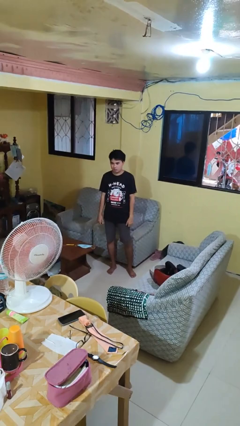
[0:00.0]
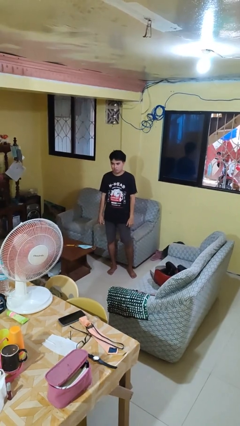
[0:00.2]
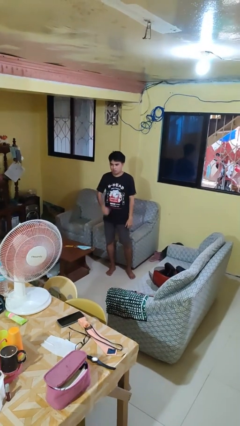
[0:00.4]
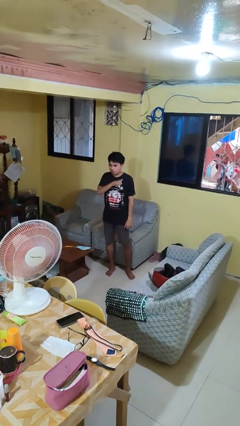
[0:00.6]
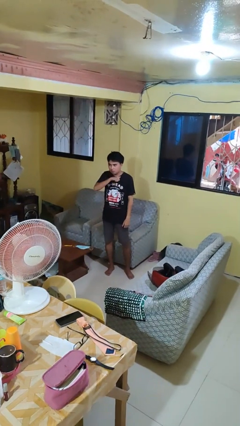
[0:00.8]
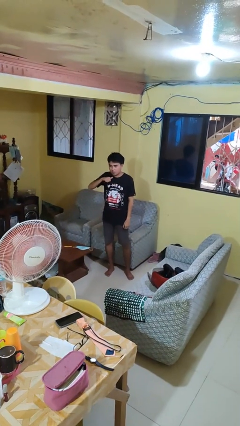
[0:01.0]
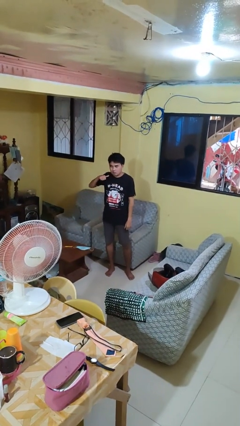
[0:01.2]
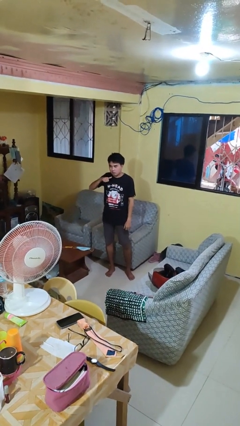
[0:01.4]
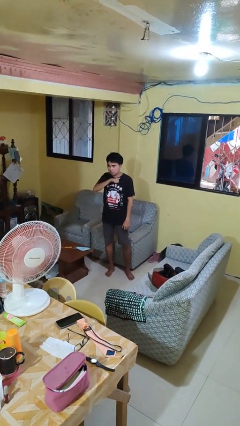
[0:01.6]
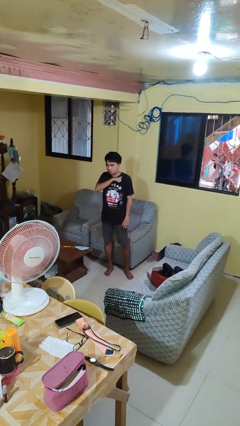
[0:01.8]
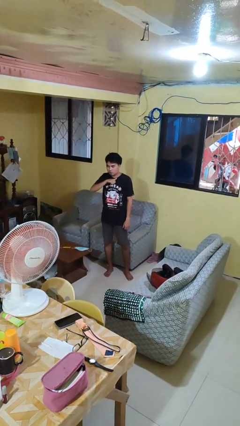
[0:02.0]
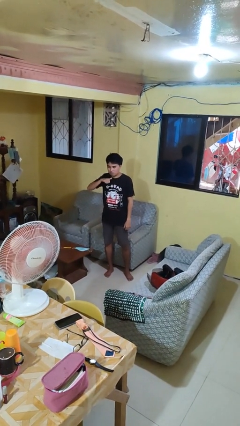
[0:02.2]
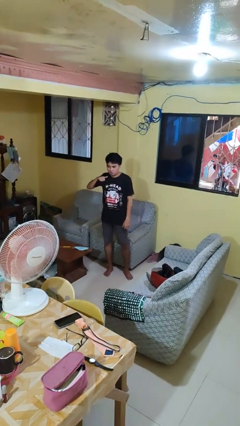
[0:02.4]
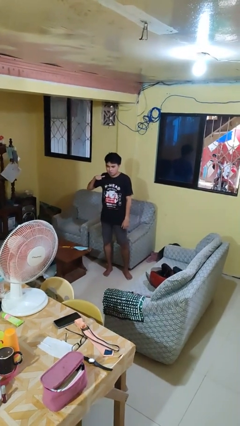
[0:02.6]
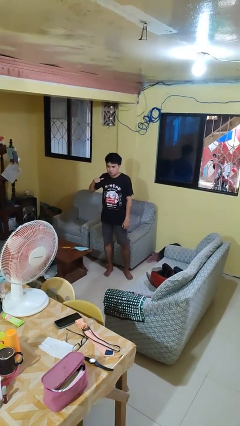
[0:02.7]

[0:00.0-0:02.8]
person gestures cut

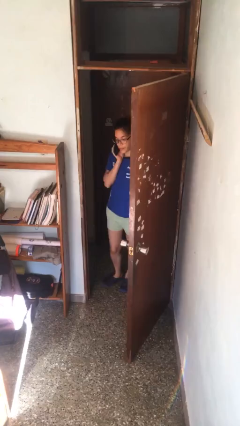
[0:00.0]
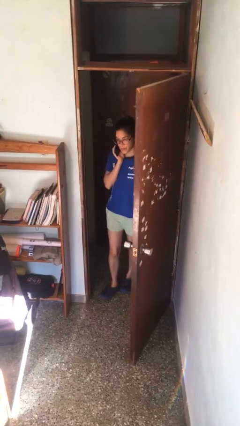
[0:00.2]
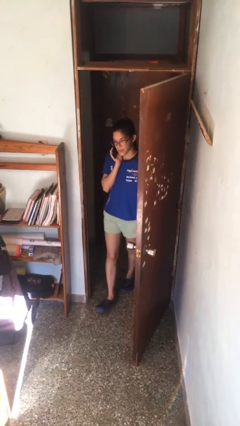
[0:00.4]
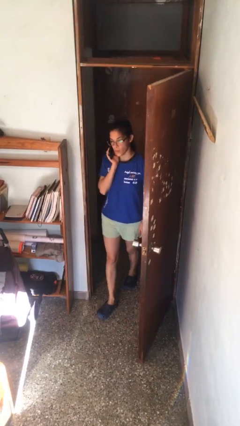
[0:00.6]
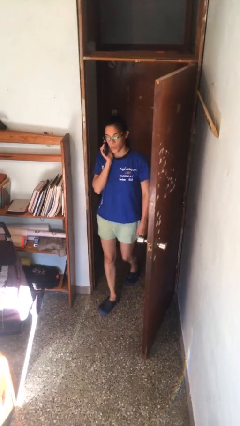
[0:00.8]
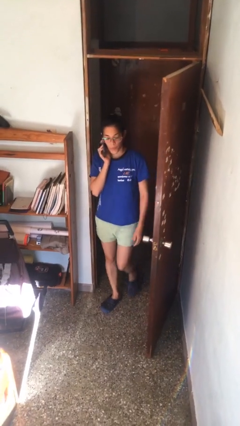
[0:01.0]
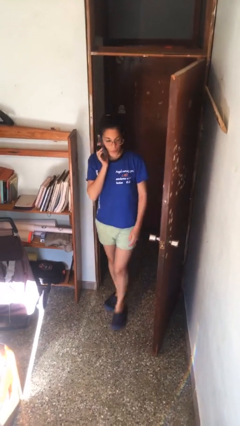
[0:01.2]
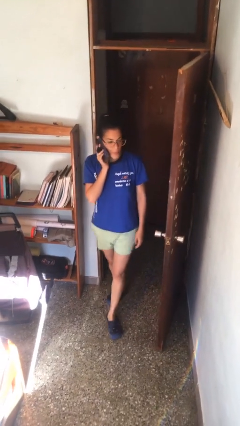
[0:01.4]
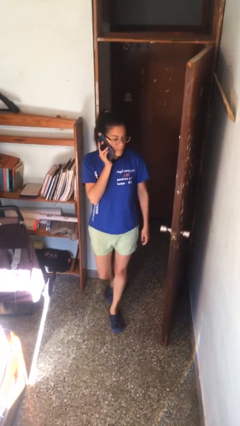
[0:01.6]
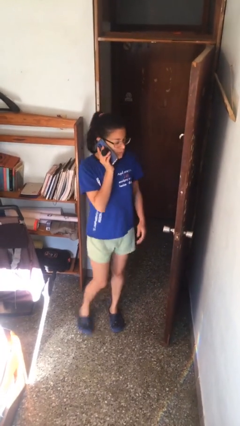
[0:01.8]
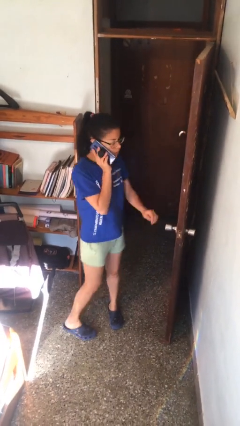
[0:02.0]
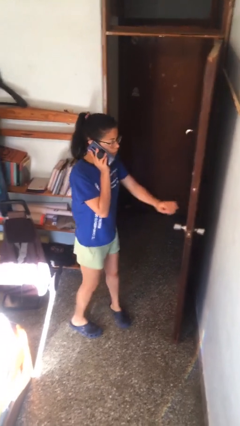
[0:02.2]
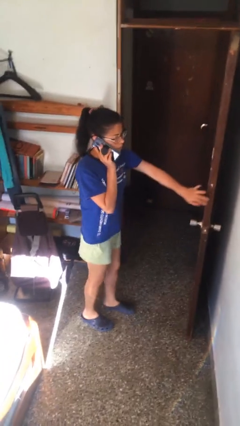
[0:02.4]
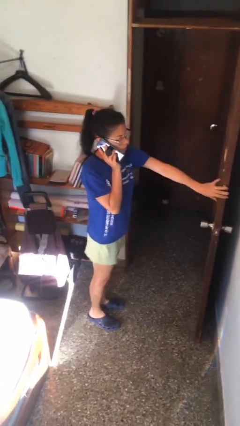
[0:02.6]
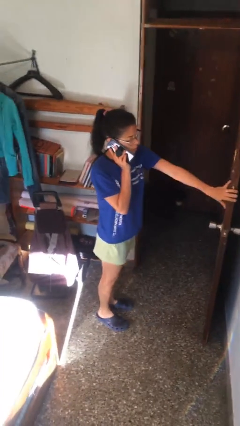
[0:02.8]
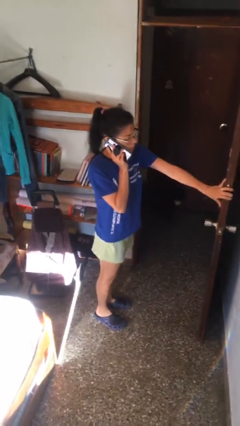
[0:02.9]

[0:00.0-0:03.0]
person enters scene through structure

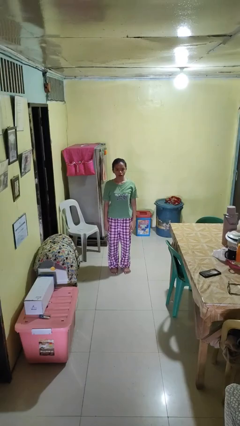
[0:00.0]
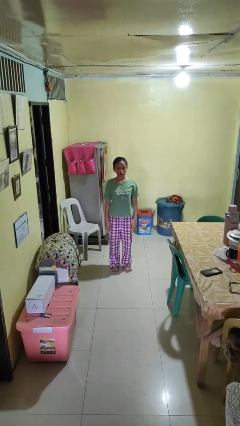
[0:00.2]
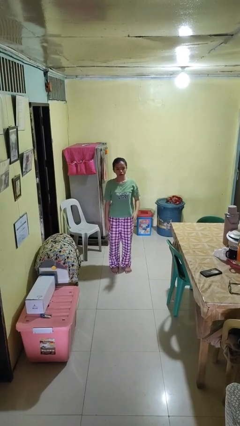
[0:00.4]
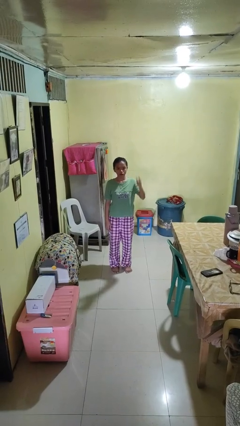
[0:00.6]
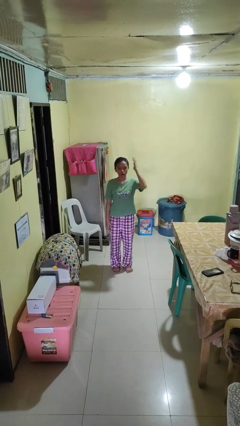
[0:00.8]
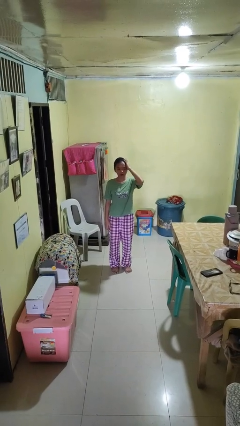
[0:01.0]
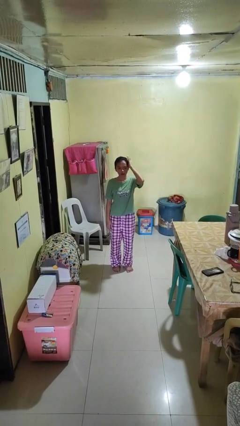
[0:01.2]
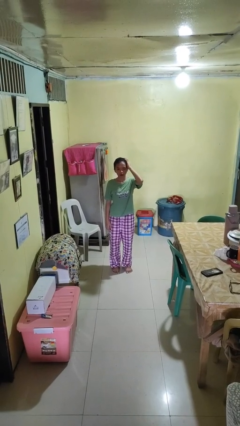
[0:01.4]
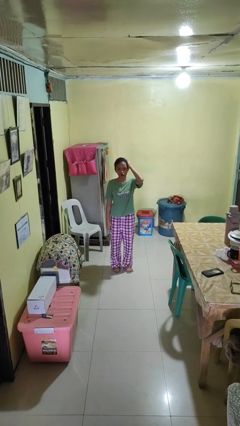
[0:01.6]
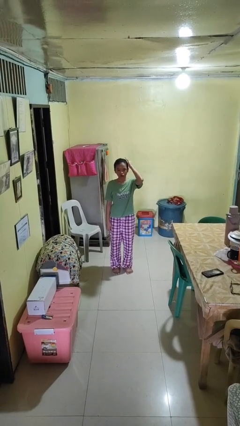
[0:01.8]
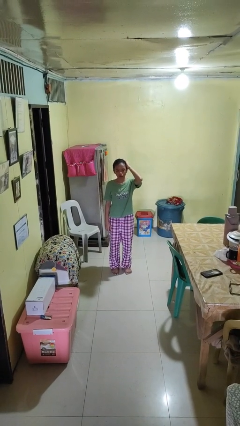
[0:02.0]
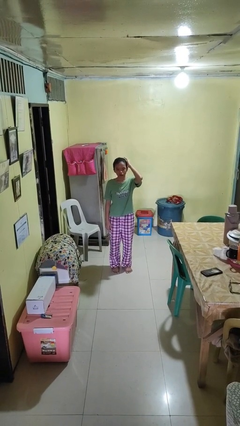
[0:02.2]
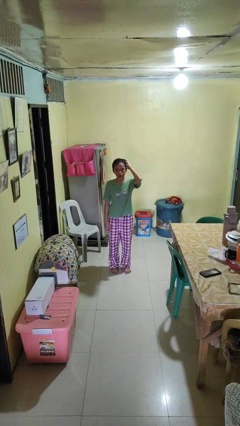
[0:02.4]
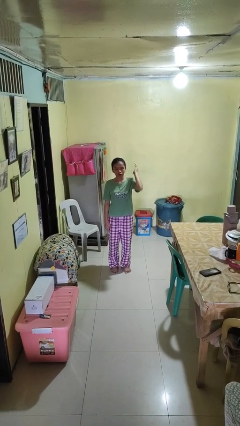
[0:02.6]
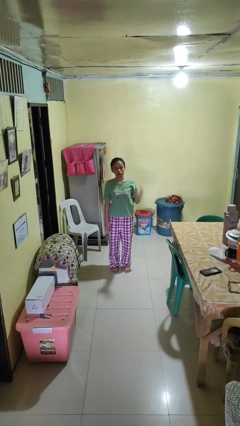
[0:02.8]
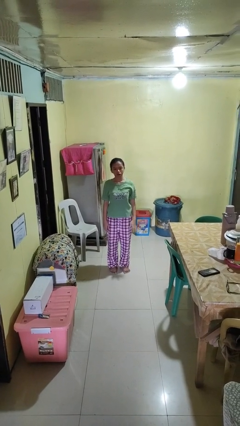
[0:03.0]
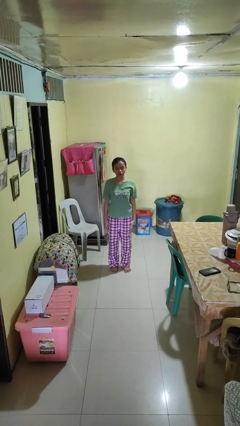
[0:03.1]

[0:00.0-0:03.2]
person pats head

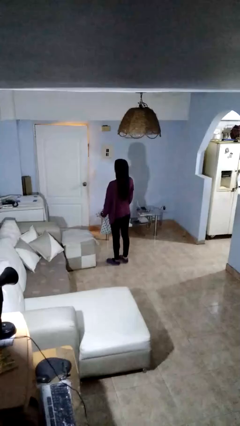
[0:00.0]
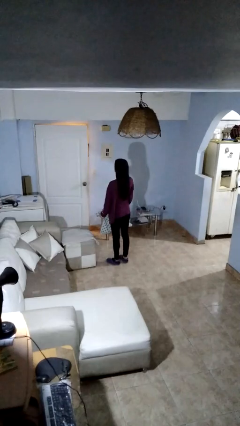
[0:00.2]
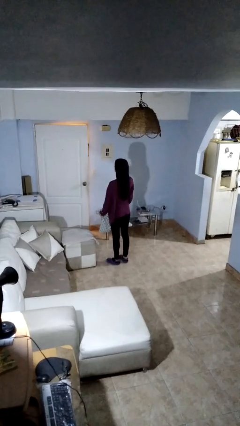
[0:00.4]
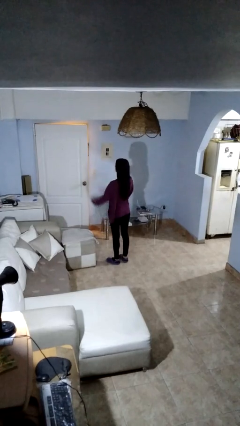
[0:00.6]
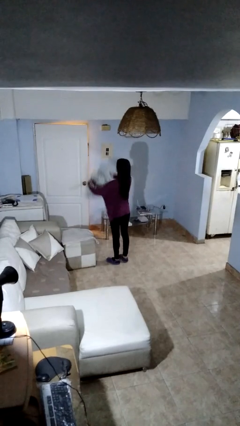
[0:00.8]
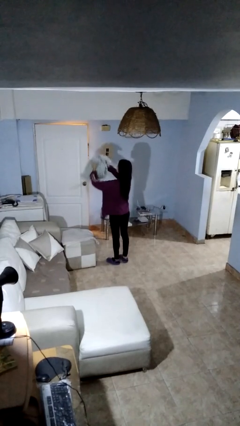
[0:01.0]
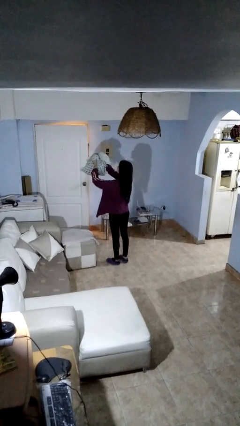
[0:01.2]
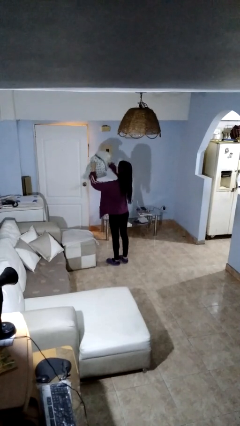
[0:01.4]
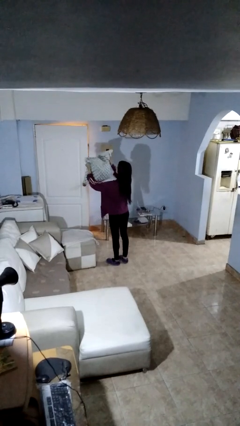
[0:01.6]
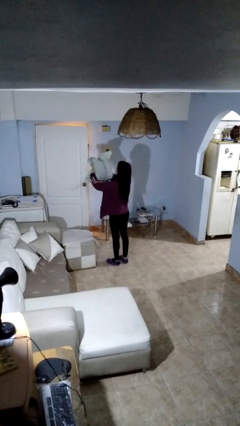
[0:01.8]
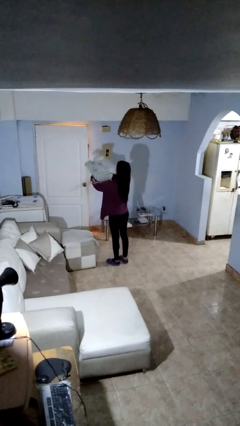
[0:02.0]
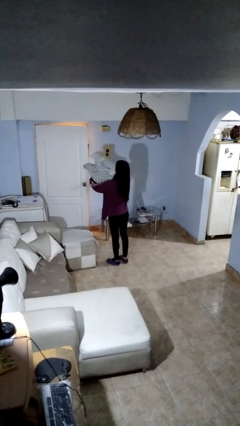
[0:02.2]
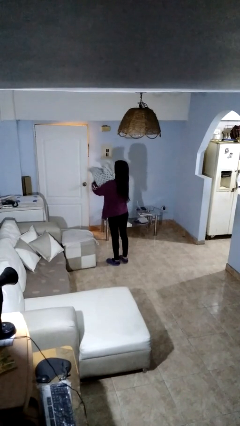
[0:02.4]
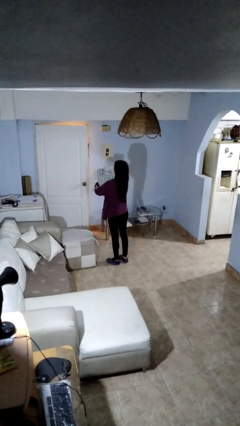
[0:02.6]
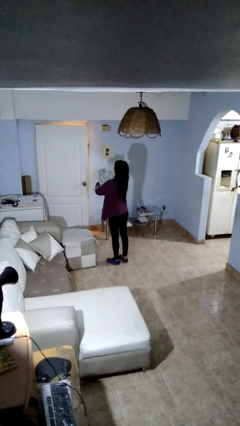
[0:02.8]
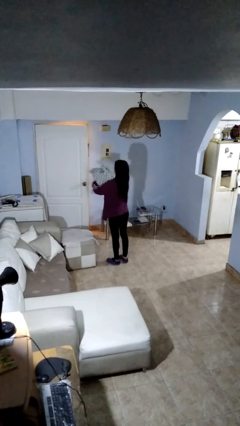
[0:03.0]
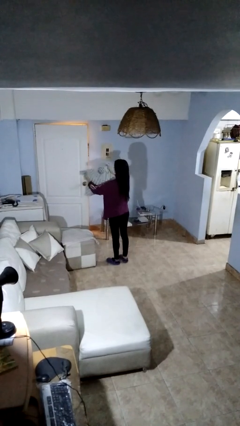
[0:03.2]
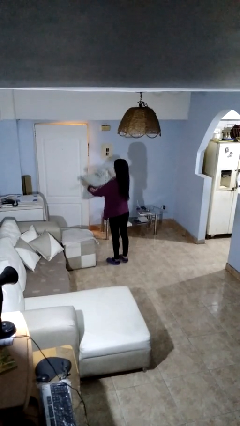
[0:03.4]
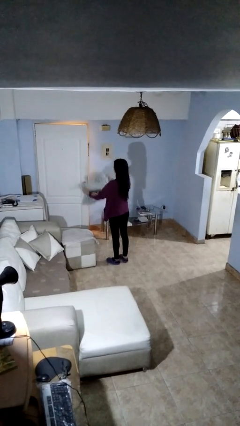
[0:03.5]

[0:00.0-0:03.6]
person squeezes object

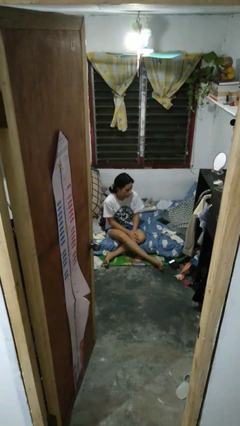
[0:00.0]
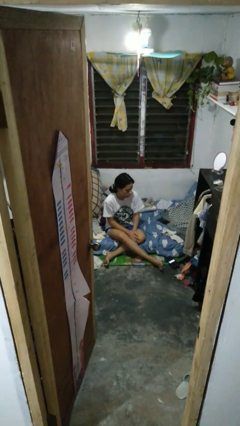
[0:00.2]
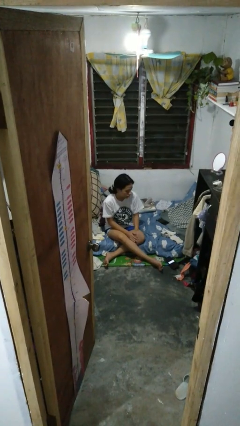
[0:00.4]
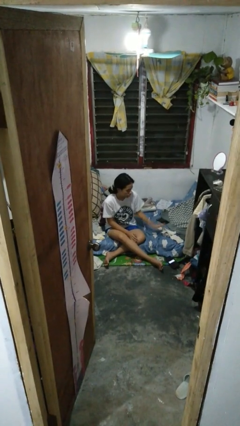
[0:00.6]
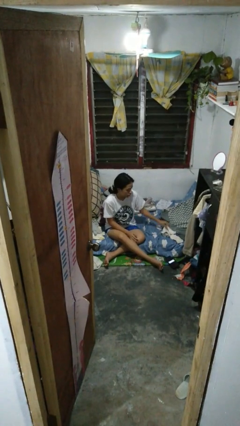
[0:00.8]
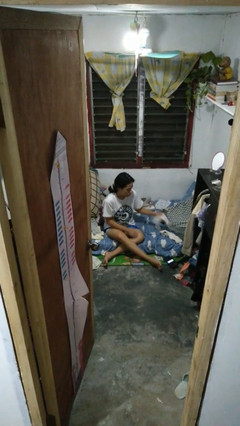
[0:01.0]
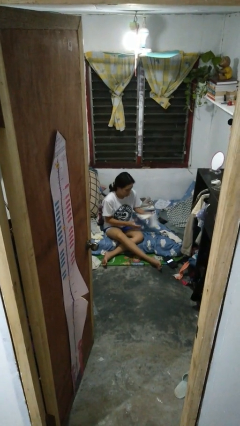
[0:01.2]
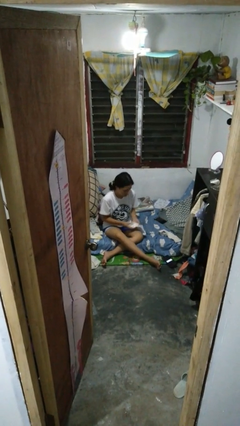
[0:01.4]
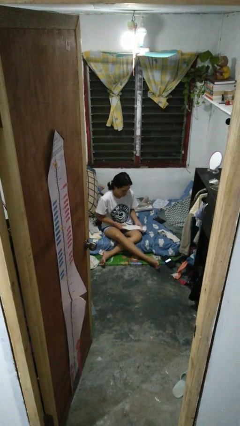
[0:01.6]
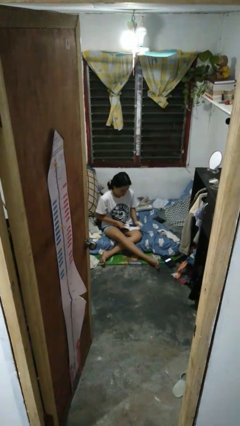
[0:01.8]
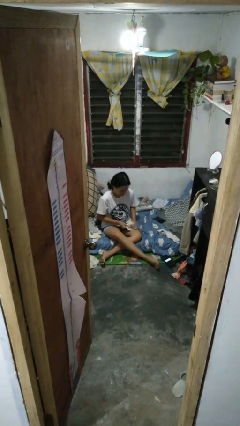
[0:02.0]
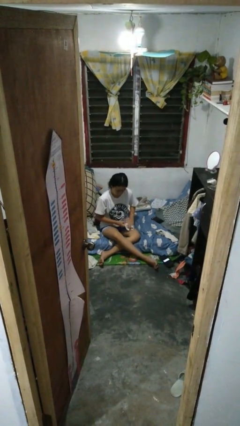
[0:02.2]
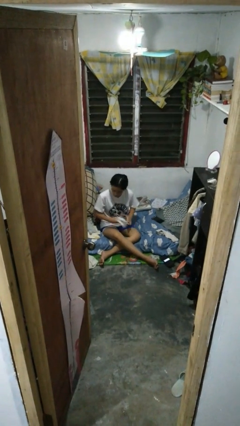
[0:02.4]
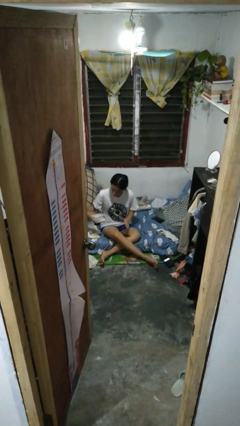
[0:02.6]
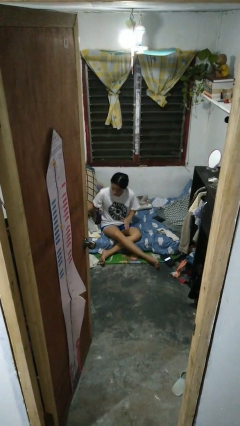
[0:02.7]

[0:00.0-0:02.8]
person folds socks

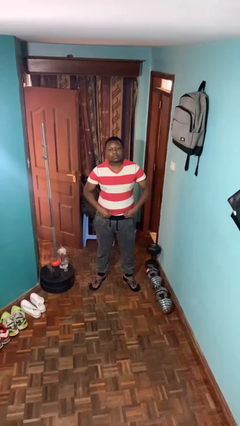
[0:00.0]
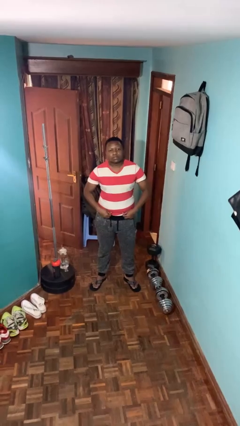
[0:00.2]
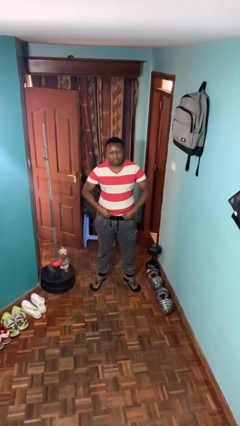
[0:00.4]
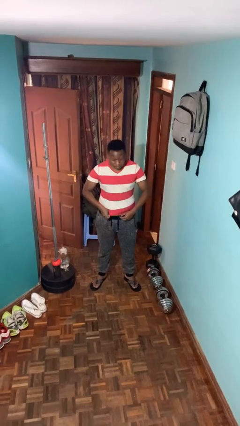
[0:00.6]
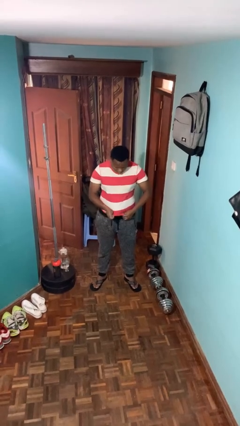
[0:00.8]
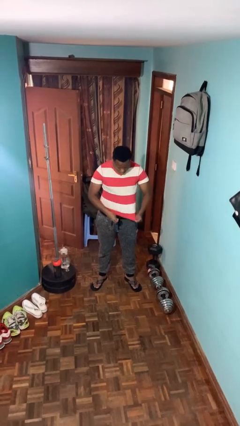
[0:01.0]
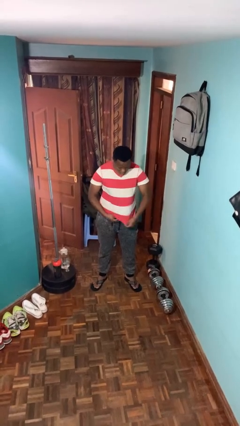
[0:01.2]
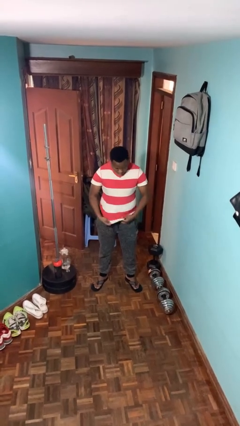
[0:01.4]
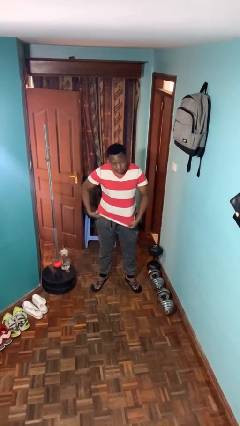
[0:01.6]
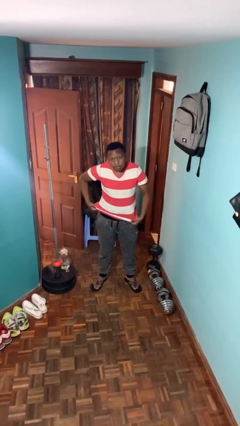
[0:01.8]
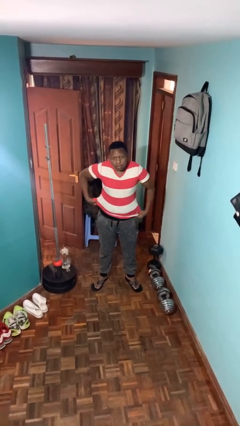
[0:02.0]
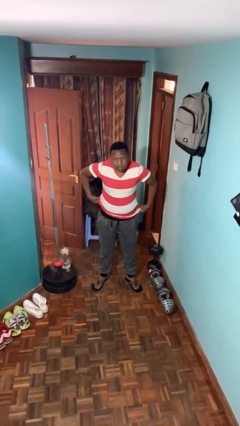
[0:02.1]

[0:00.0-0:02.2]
person untucks shirt
